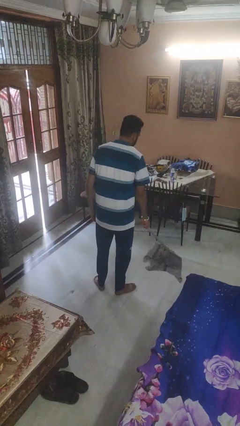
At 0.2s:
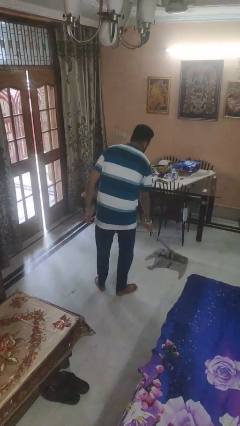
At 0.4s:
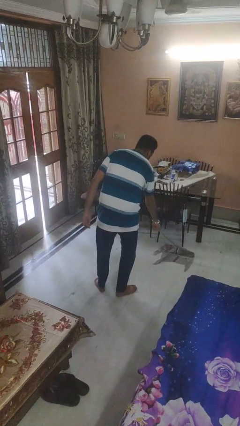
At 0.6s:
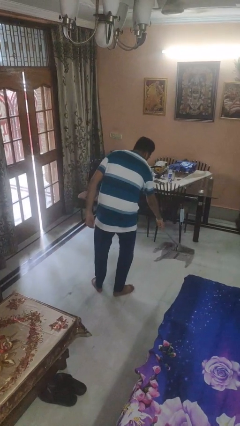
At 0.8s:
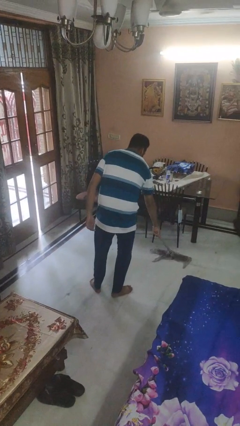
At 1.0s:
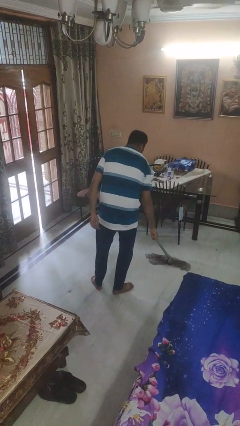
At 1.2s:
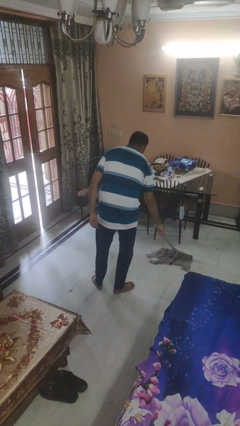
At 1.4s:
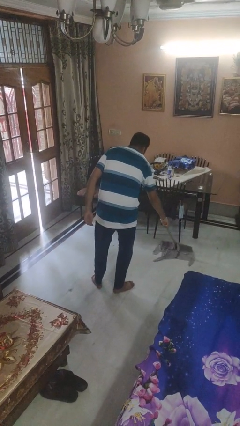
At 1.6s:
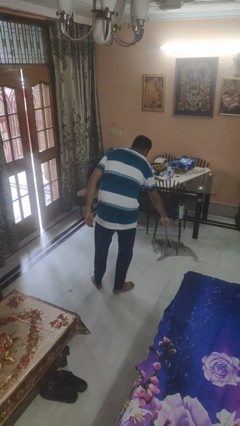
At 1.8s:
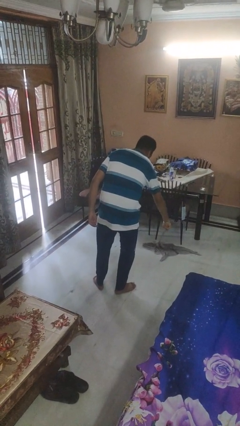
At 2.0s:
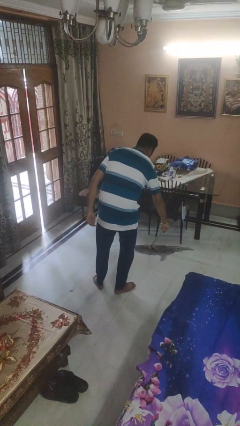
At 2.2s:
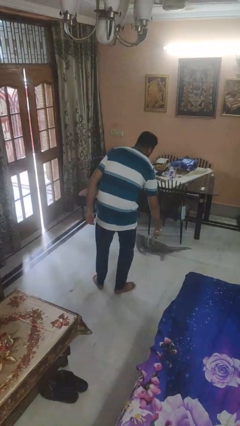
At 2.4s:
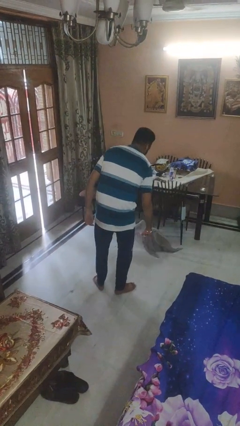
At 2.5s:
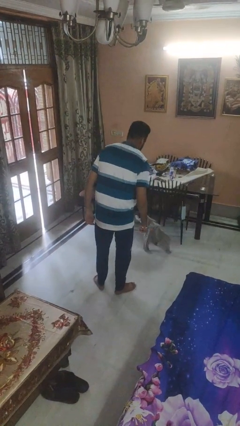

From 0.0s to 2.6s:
person mops

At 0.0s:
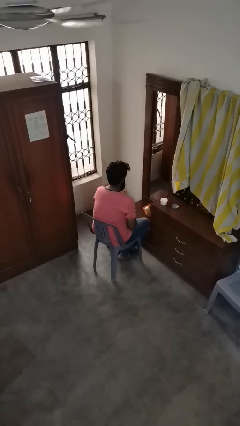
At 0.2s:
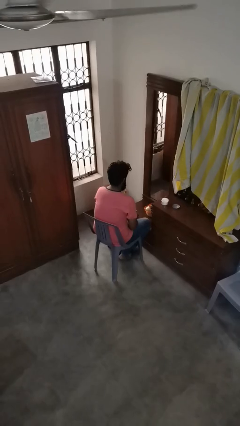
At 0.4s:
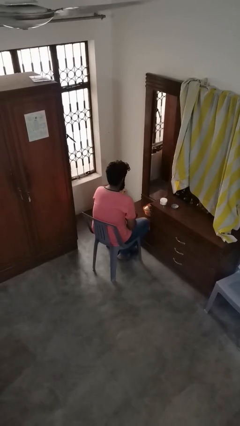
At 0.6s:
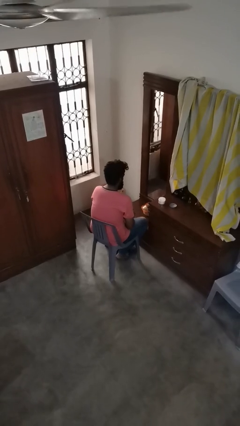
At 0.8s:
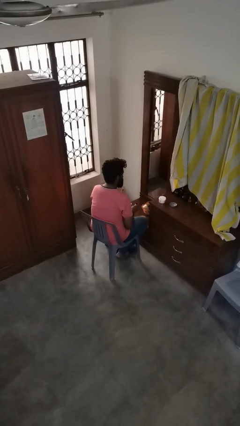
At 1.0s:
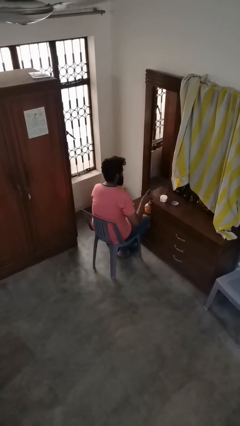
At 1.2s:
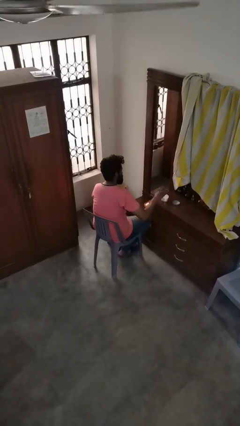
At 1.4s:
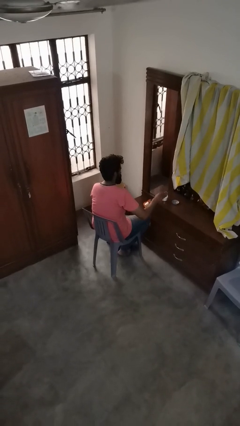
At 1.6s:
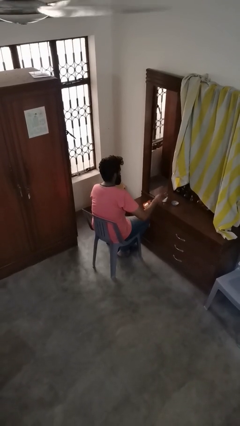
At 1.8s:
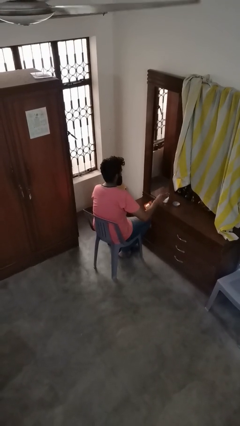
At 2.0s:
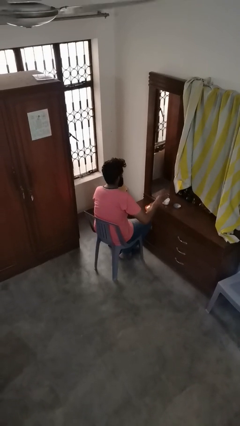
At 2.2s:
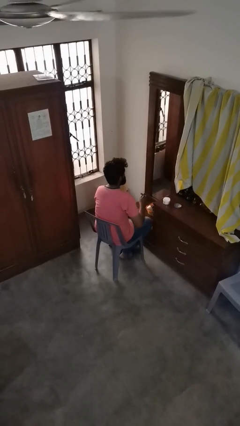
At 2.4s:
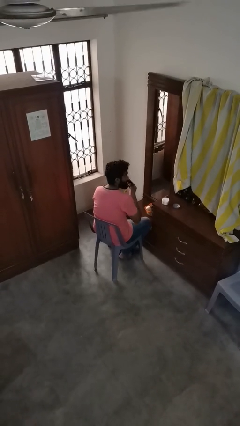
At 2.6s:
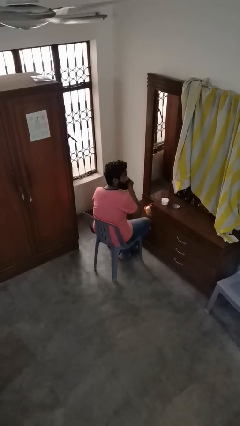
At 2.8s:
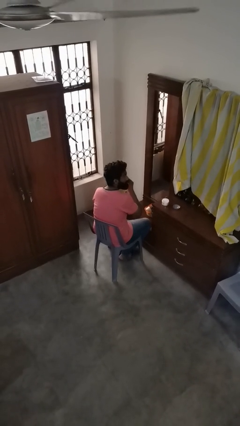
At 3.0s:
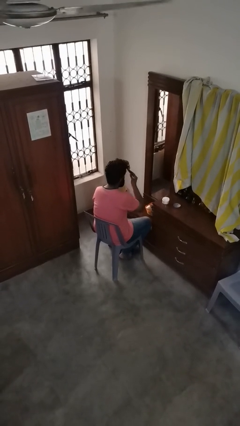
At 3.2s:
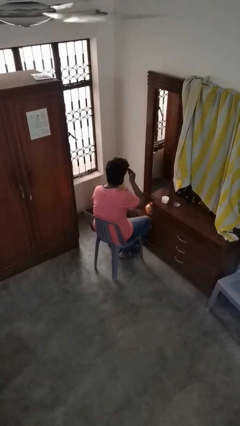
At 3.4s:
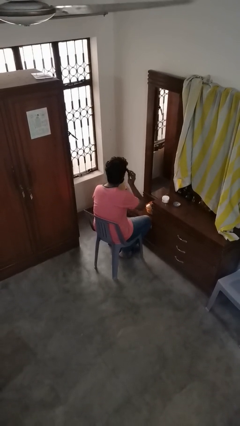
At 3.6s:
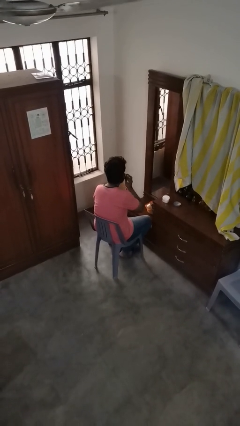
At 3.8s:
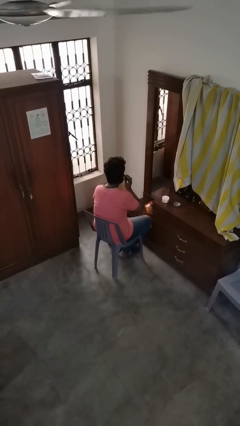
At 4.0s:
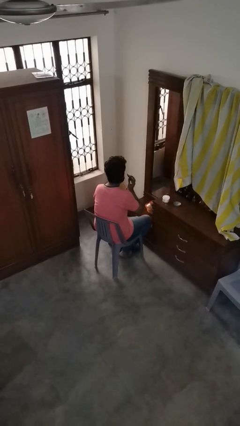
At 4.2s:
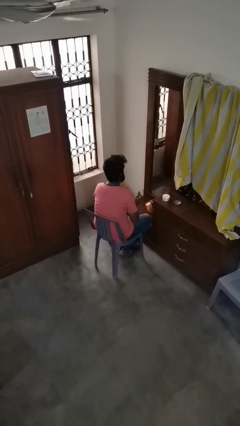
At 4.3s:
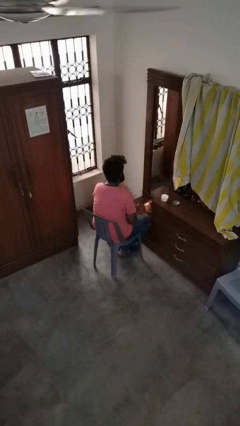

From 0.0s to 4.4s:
person applies foundation makeup

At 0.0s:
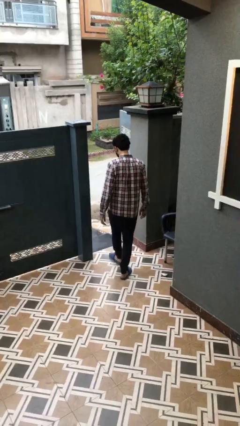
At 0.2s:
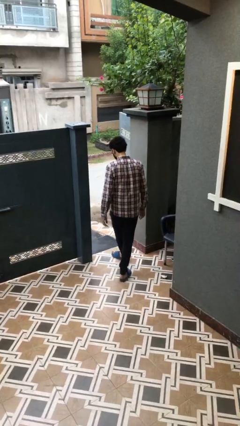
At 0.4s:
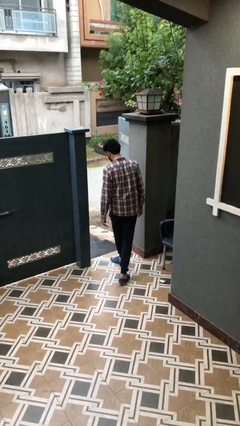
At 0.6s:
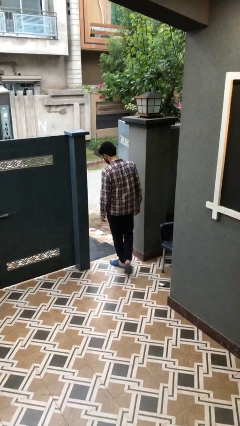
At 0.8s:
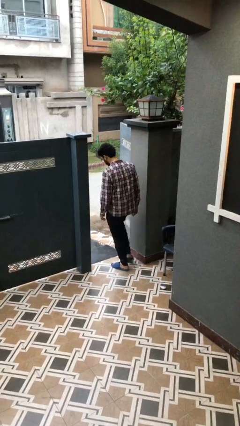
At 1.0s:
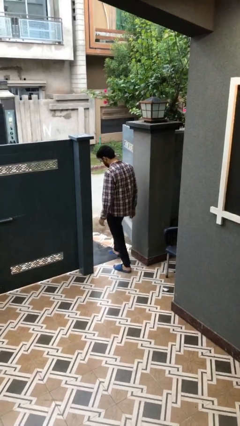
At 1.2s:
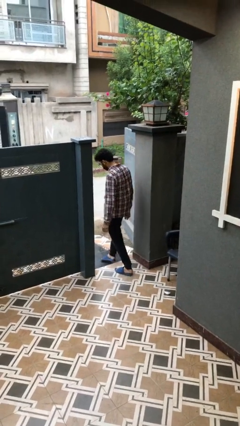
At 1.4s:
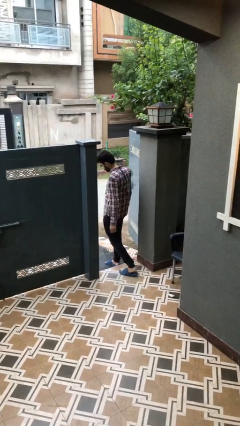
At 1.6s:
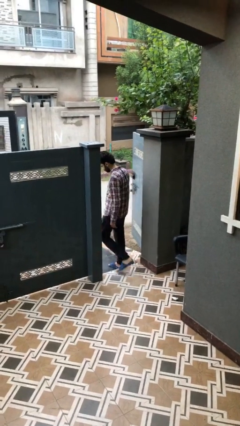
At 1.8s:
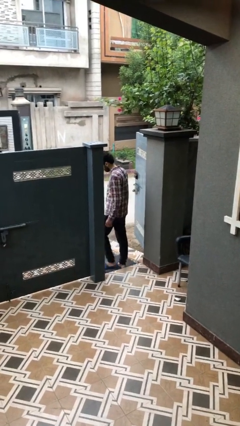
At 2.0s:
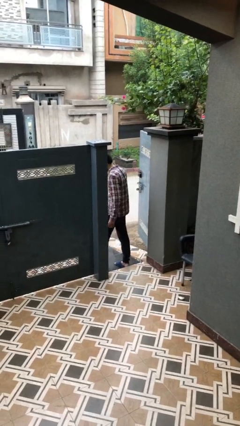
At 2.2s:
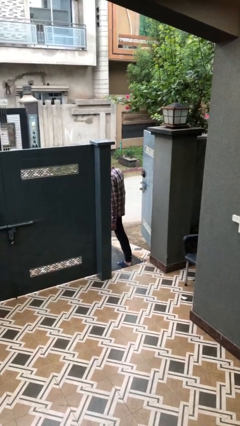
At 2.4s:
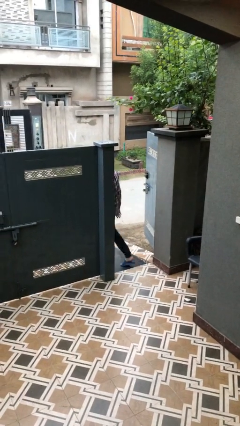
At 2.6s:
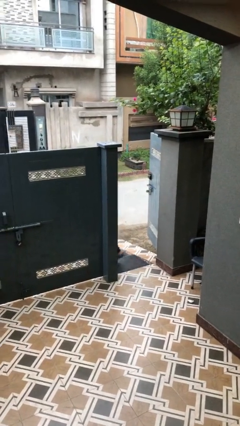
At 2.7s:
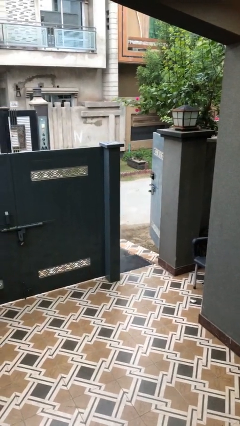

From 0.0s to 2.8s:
person exits scene through structure

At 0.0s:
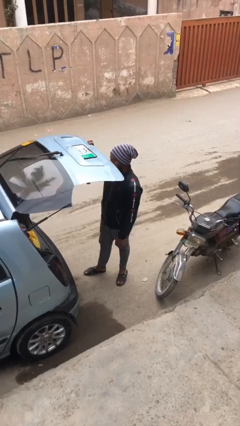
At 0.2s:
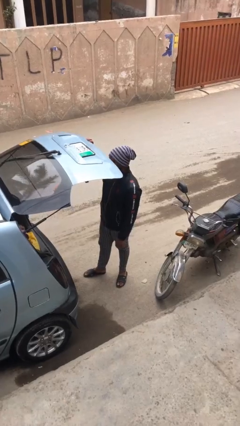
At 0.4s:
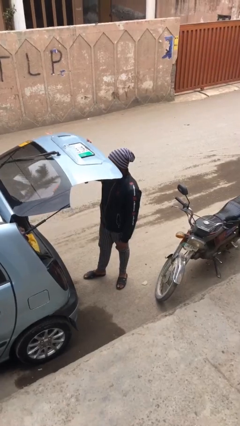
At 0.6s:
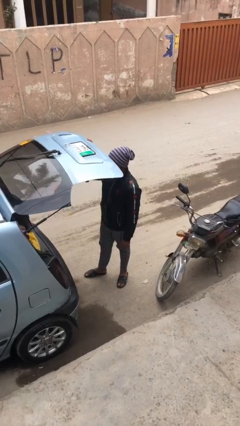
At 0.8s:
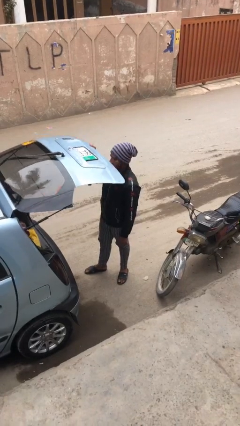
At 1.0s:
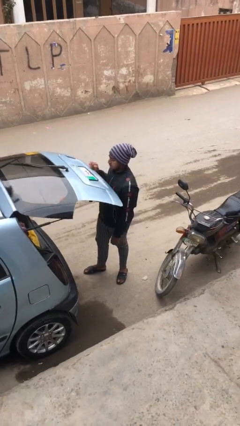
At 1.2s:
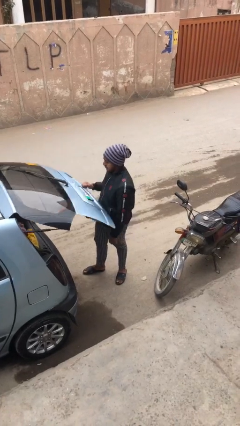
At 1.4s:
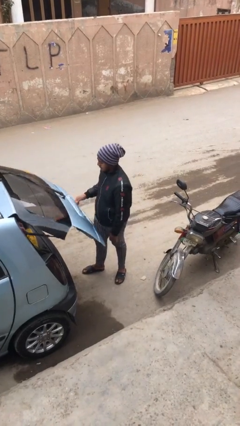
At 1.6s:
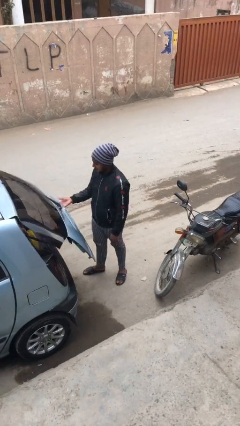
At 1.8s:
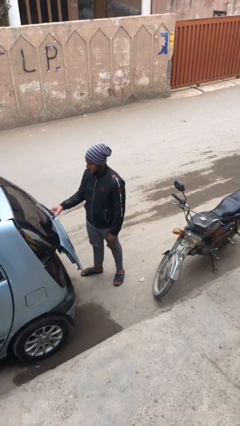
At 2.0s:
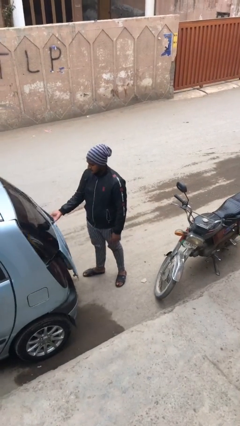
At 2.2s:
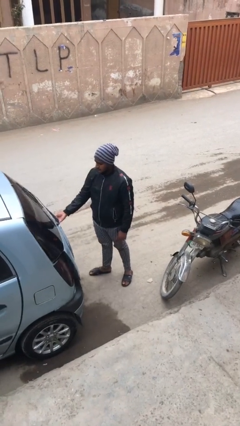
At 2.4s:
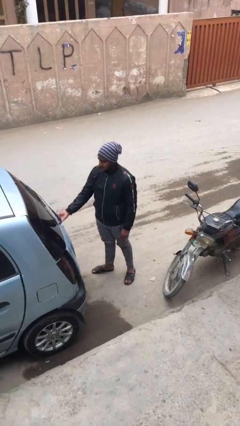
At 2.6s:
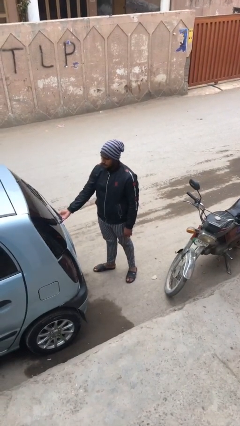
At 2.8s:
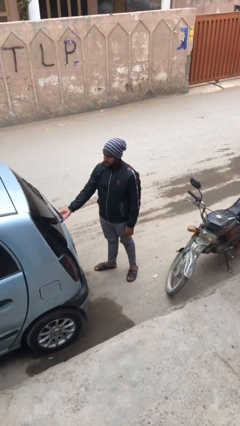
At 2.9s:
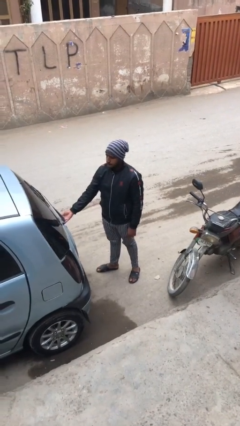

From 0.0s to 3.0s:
person closes car trunk

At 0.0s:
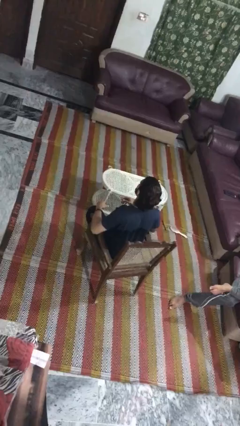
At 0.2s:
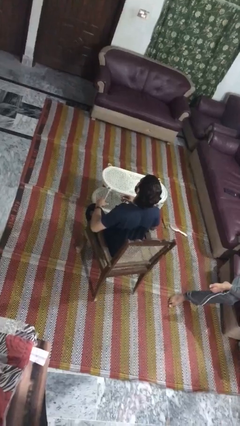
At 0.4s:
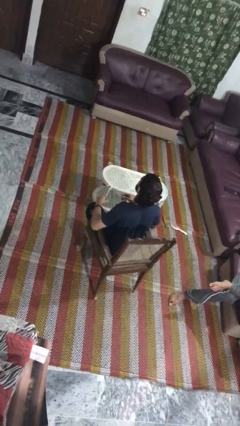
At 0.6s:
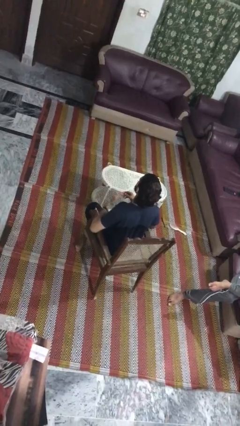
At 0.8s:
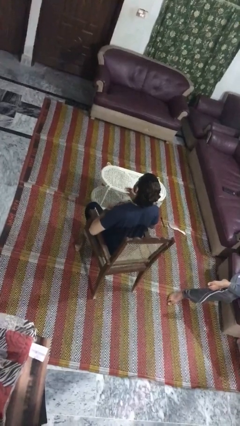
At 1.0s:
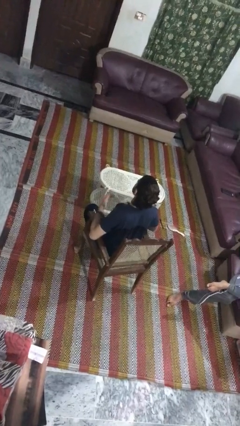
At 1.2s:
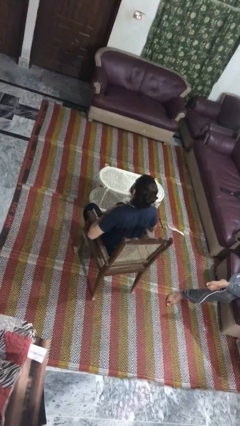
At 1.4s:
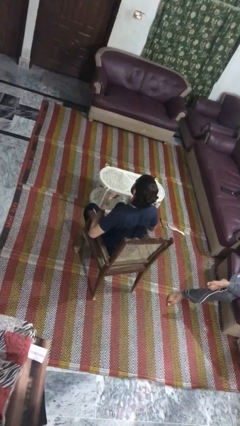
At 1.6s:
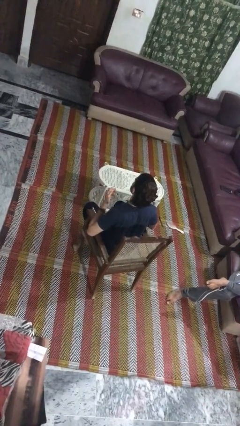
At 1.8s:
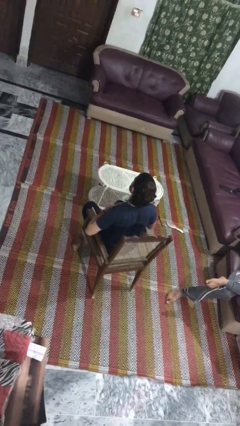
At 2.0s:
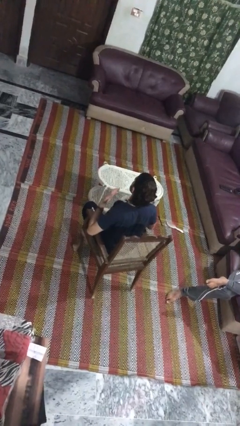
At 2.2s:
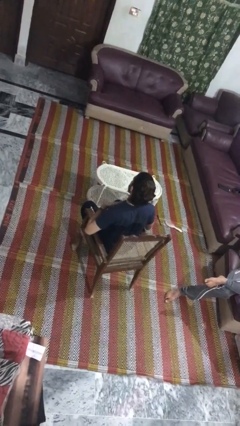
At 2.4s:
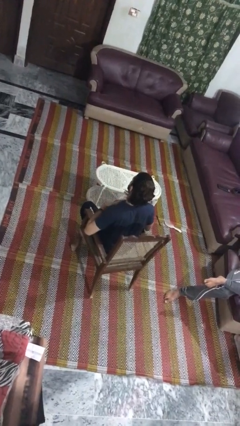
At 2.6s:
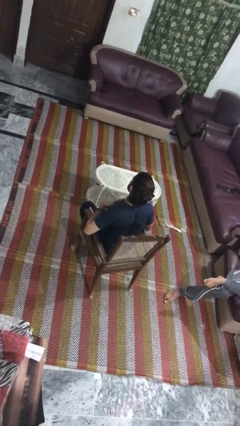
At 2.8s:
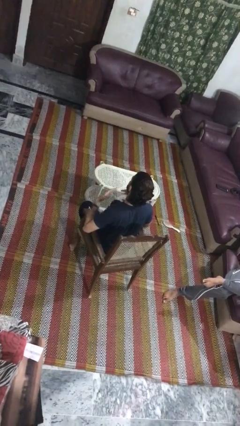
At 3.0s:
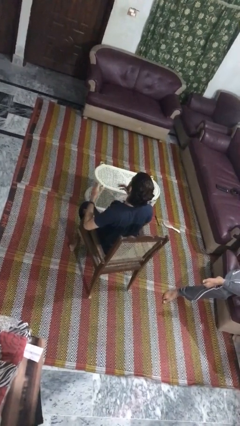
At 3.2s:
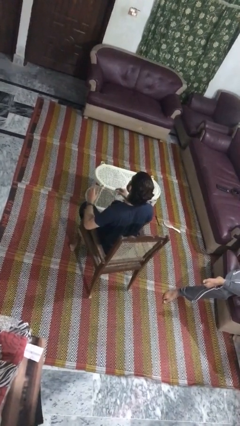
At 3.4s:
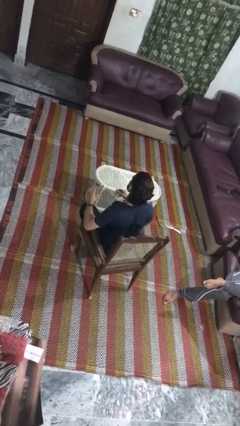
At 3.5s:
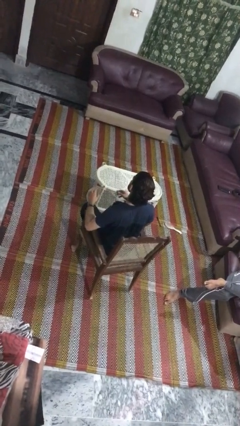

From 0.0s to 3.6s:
person drums on chest

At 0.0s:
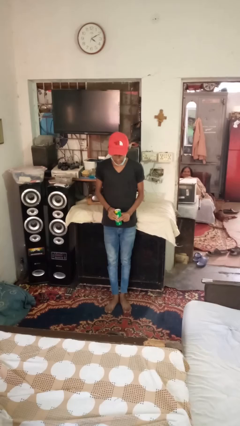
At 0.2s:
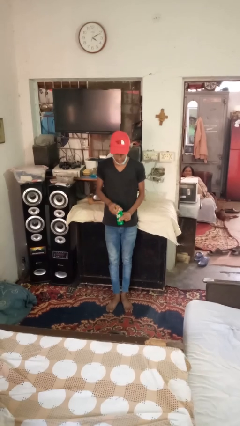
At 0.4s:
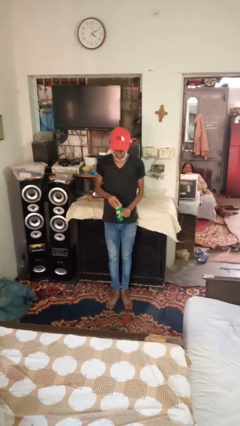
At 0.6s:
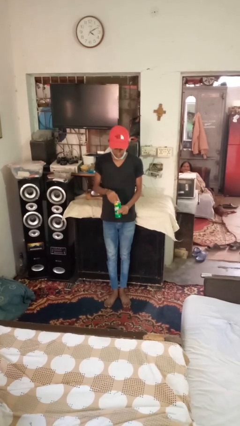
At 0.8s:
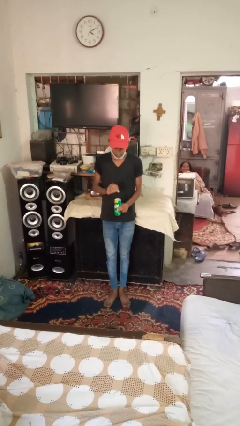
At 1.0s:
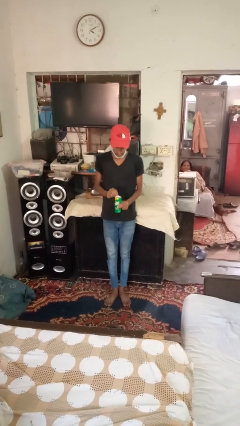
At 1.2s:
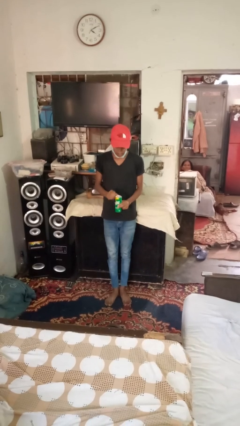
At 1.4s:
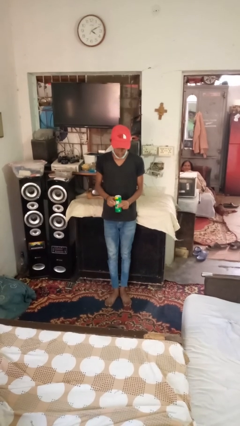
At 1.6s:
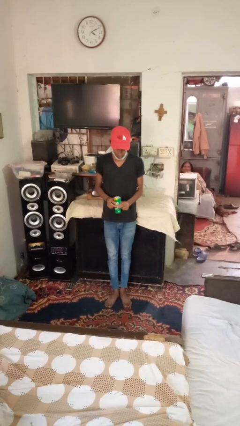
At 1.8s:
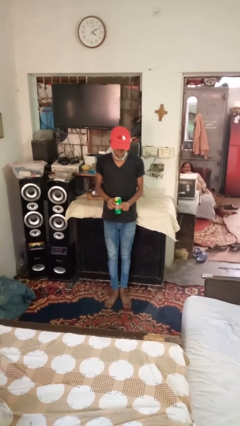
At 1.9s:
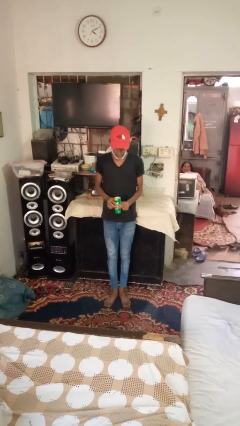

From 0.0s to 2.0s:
person opens beverage can
